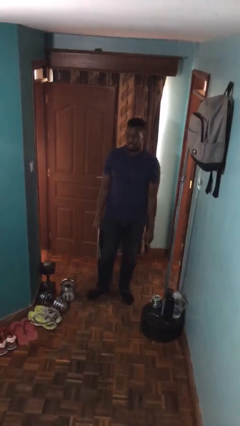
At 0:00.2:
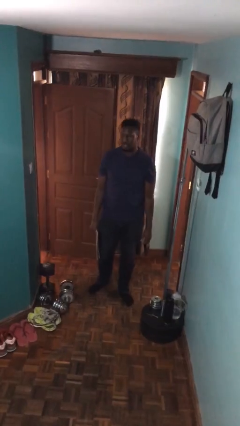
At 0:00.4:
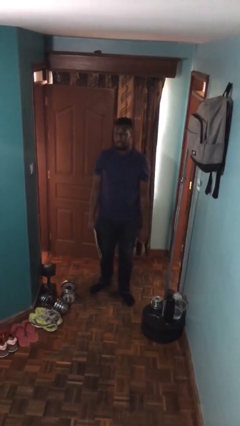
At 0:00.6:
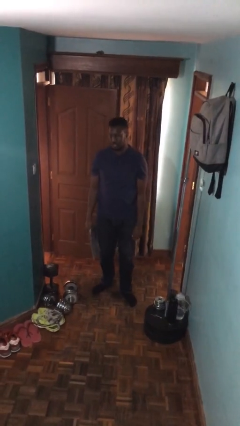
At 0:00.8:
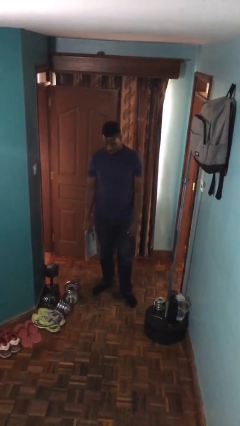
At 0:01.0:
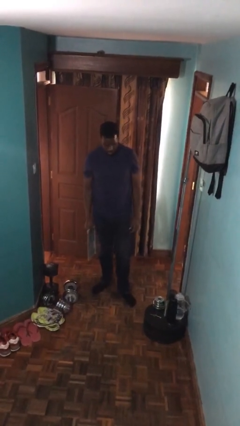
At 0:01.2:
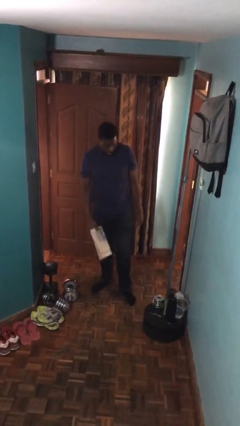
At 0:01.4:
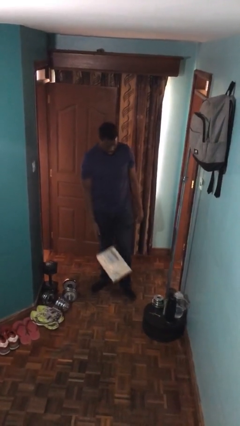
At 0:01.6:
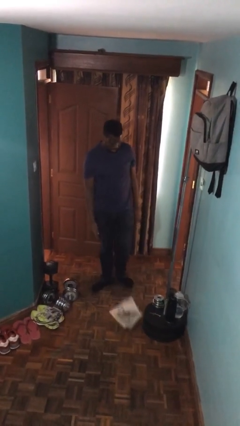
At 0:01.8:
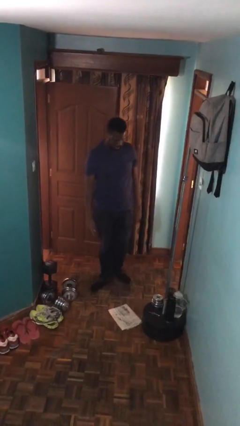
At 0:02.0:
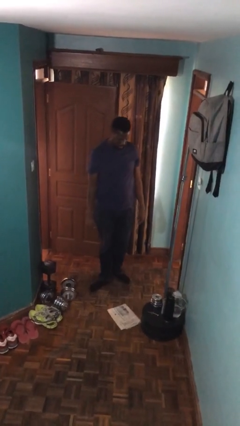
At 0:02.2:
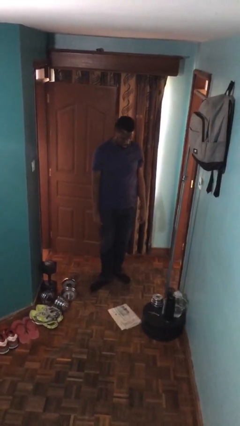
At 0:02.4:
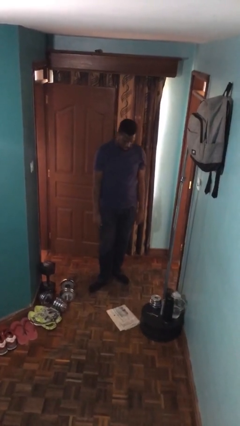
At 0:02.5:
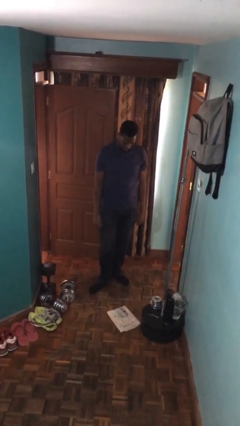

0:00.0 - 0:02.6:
person drops object

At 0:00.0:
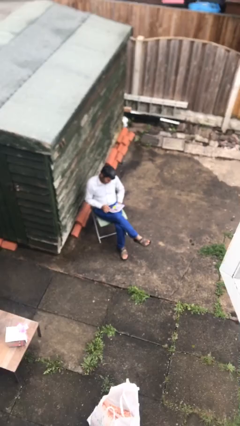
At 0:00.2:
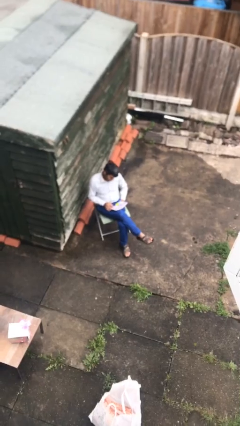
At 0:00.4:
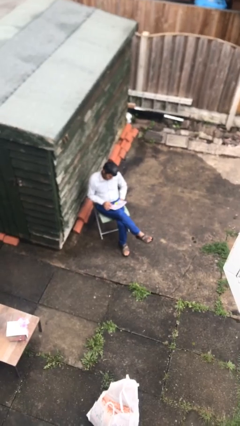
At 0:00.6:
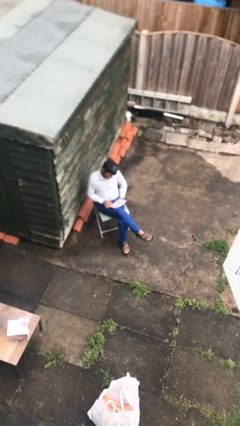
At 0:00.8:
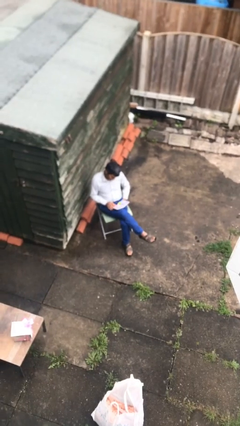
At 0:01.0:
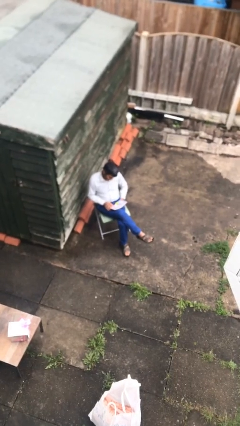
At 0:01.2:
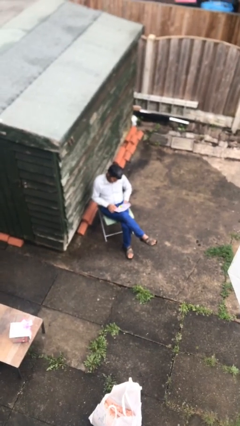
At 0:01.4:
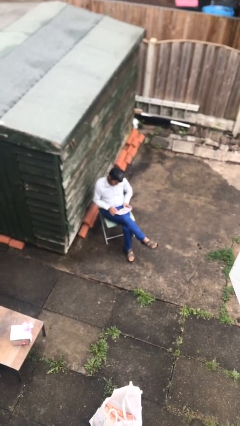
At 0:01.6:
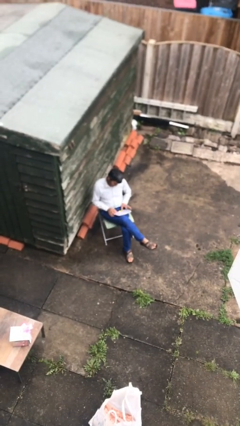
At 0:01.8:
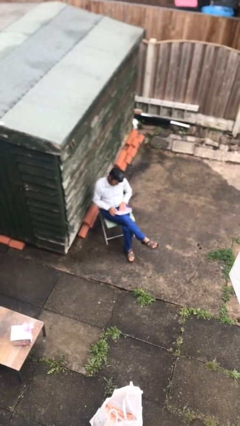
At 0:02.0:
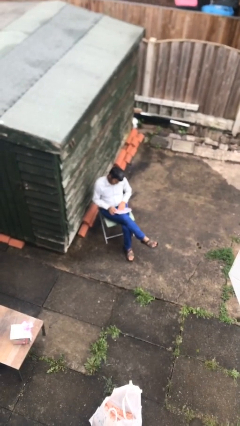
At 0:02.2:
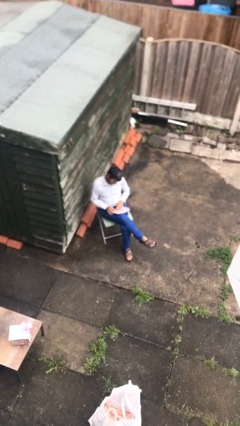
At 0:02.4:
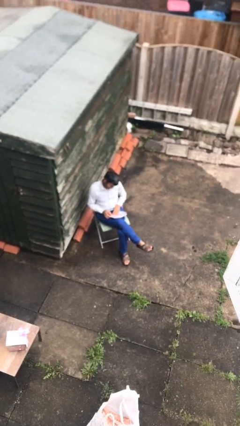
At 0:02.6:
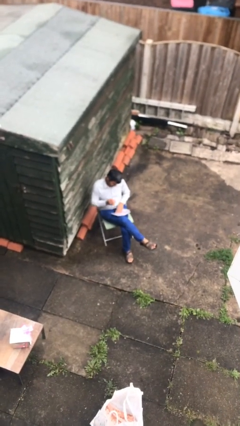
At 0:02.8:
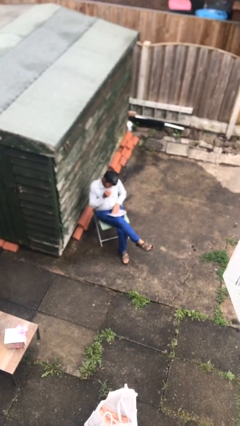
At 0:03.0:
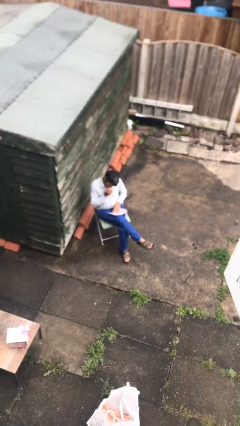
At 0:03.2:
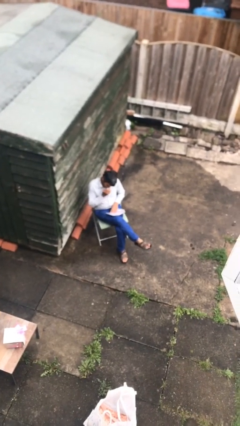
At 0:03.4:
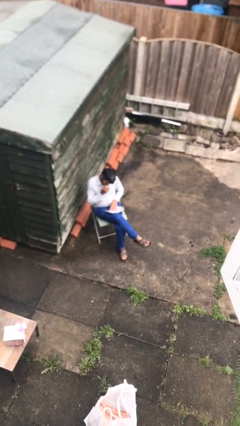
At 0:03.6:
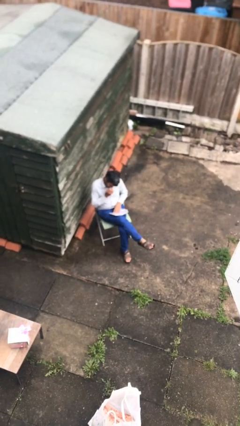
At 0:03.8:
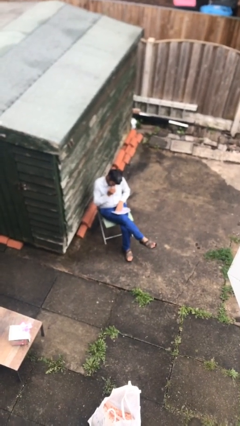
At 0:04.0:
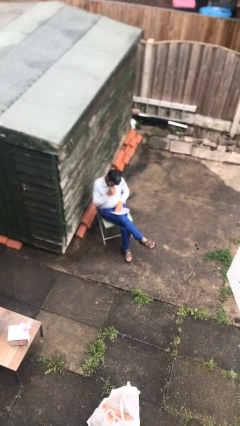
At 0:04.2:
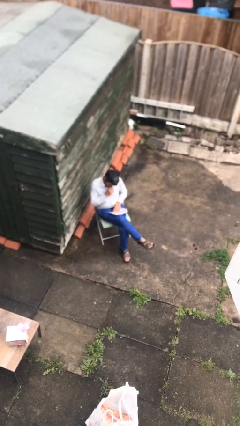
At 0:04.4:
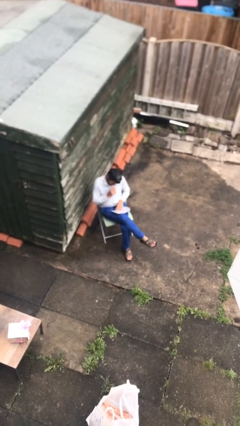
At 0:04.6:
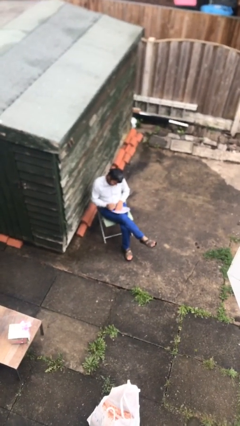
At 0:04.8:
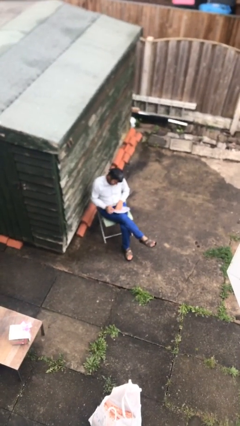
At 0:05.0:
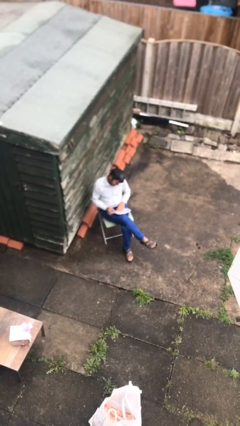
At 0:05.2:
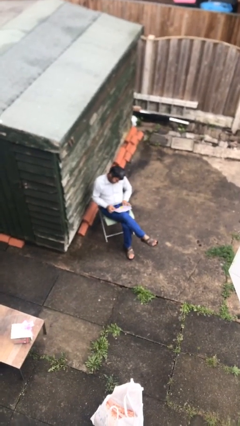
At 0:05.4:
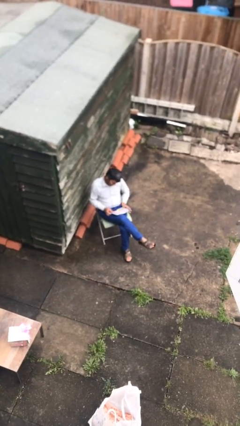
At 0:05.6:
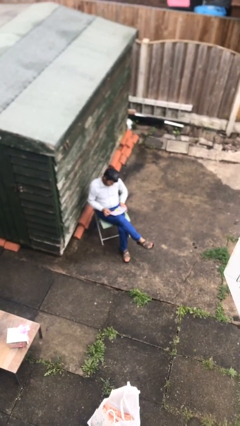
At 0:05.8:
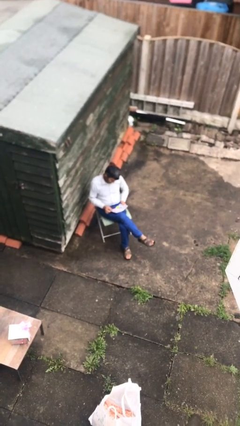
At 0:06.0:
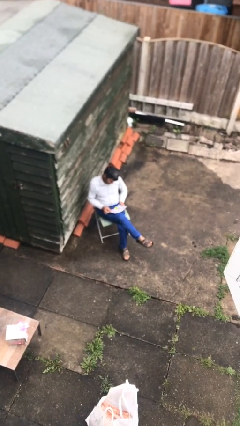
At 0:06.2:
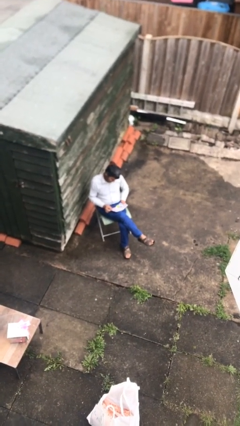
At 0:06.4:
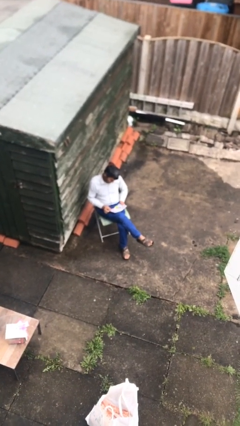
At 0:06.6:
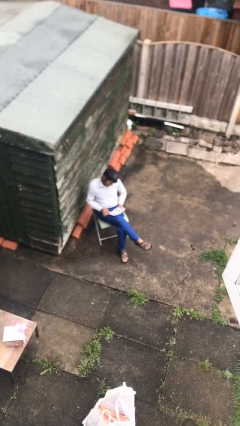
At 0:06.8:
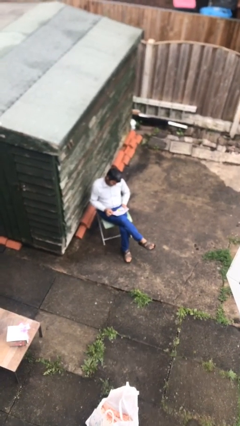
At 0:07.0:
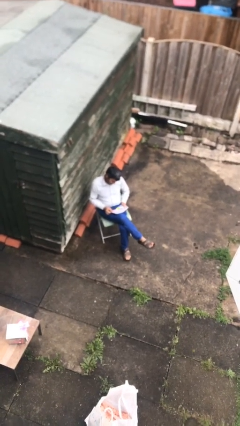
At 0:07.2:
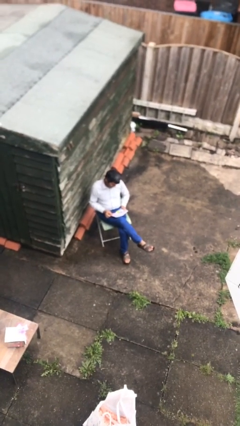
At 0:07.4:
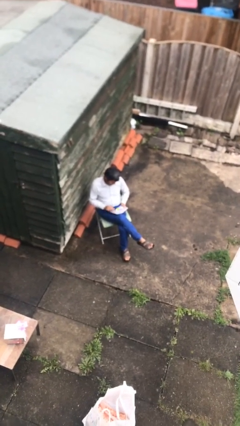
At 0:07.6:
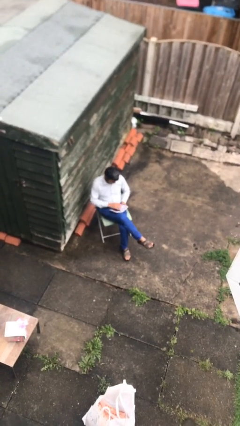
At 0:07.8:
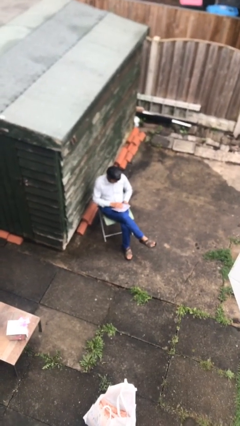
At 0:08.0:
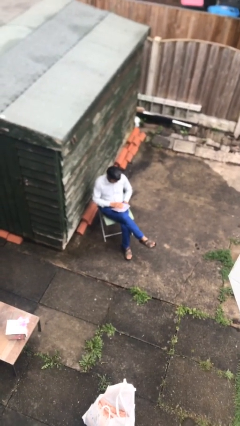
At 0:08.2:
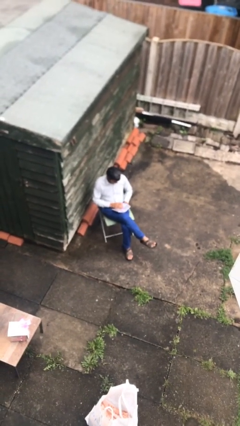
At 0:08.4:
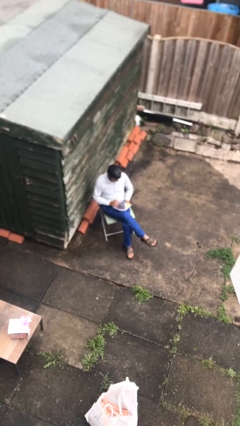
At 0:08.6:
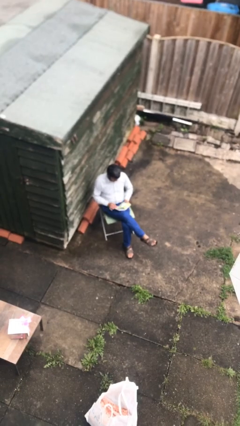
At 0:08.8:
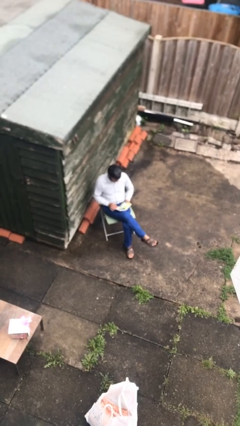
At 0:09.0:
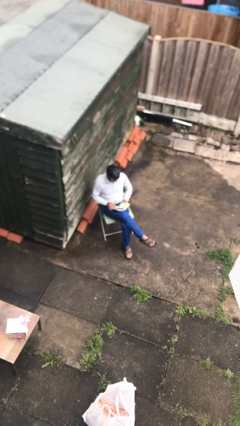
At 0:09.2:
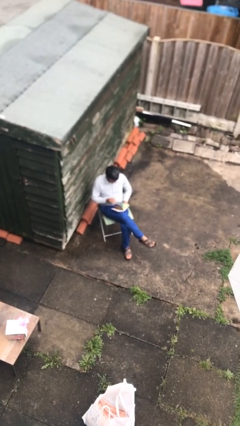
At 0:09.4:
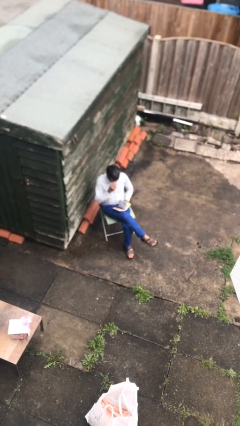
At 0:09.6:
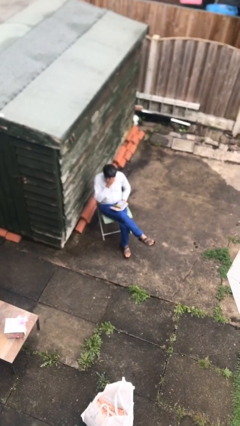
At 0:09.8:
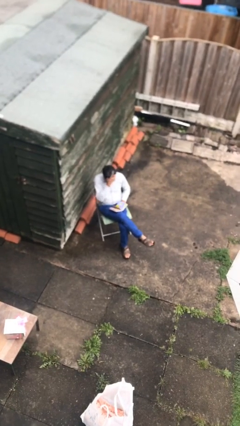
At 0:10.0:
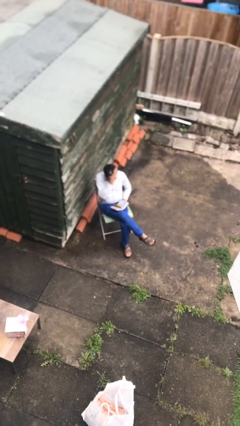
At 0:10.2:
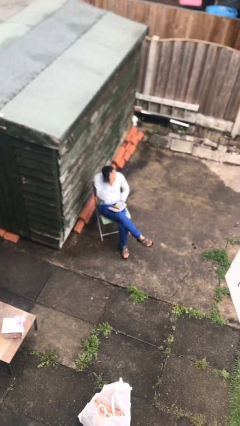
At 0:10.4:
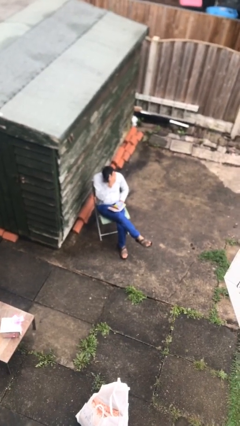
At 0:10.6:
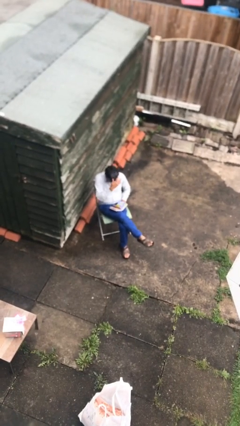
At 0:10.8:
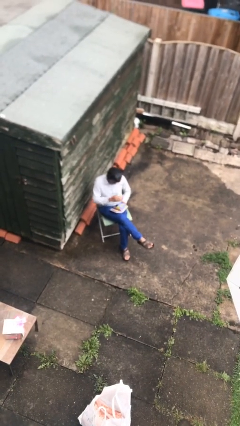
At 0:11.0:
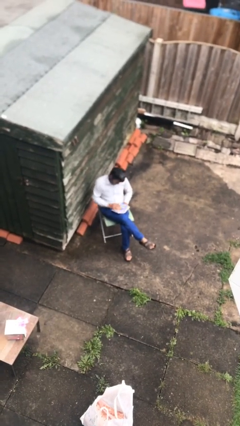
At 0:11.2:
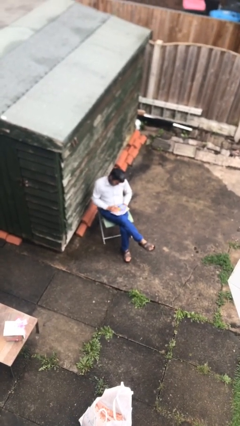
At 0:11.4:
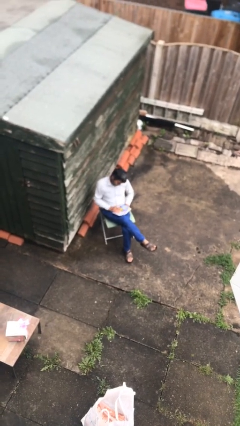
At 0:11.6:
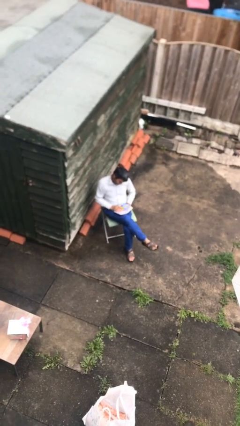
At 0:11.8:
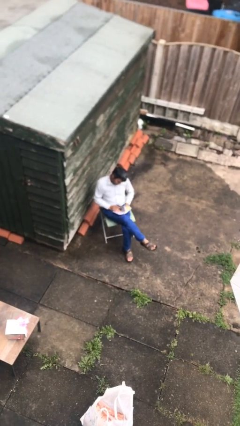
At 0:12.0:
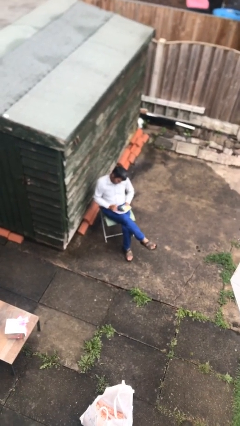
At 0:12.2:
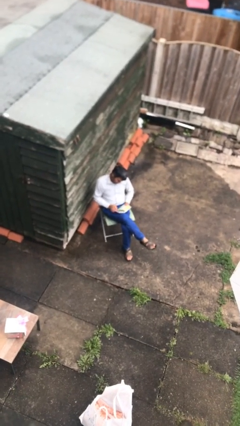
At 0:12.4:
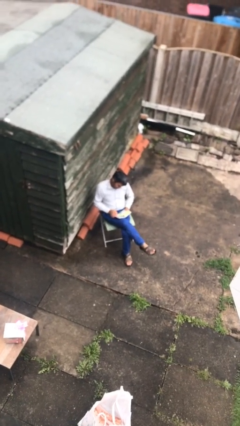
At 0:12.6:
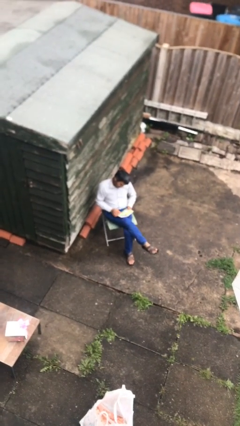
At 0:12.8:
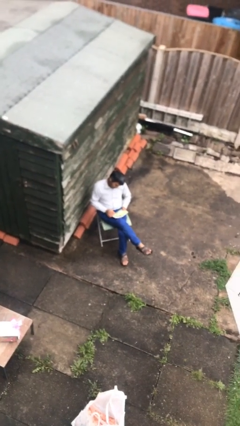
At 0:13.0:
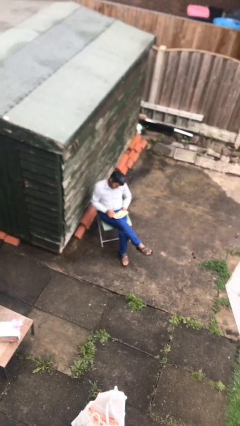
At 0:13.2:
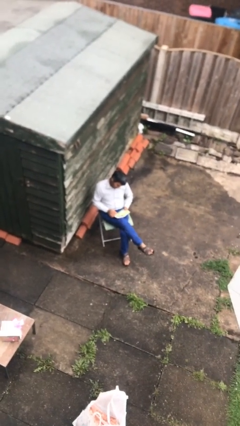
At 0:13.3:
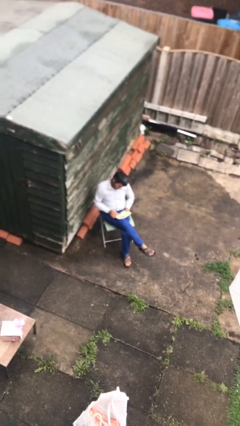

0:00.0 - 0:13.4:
person reads document

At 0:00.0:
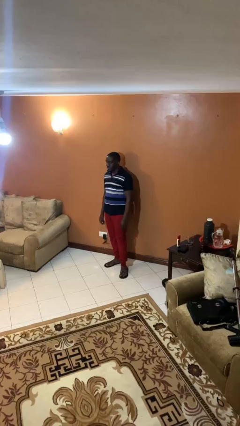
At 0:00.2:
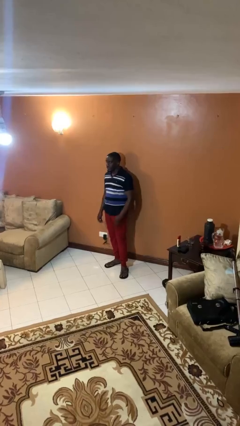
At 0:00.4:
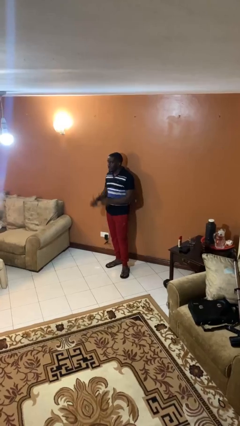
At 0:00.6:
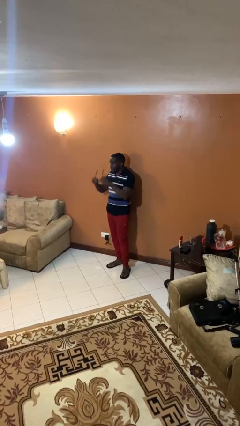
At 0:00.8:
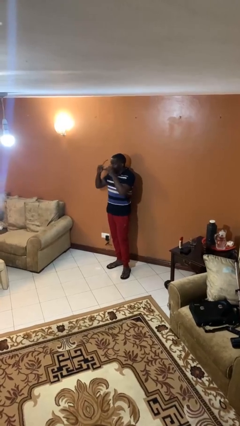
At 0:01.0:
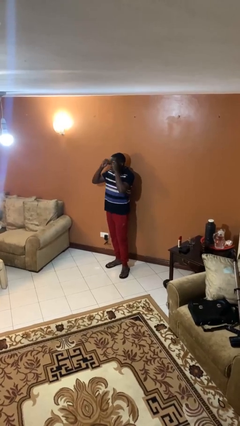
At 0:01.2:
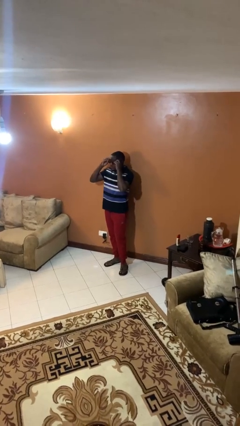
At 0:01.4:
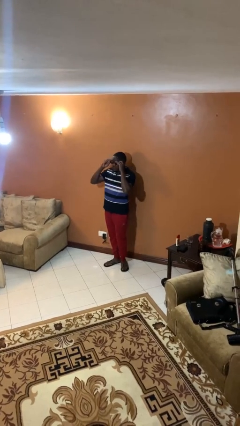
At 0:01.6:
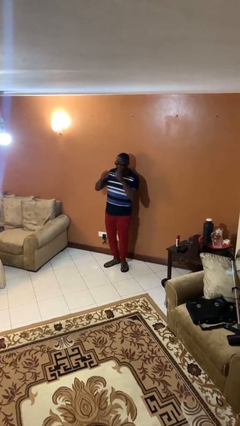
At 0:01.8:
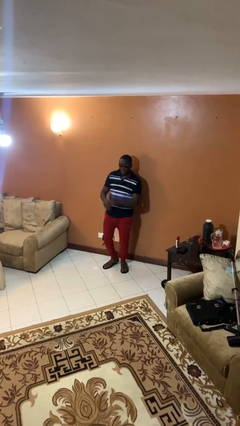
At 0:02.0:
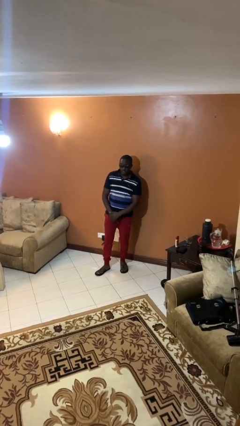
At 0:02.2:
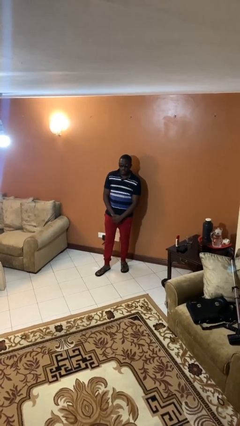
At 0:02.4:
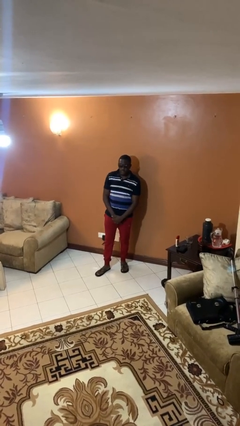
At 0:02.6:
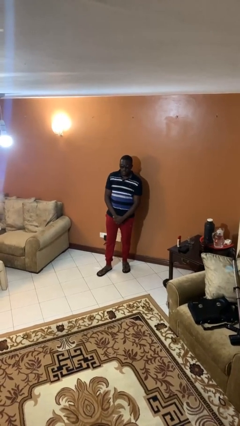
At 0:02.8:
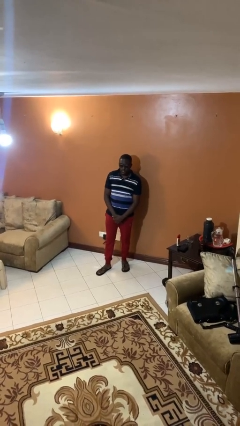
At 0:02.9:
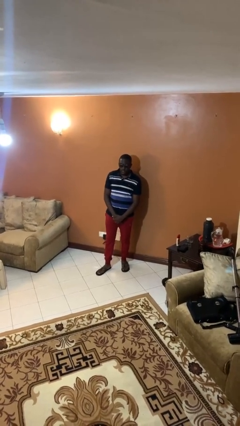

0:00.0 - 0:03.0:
person puts on sunglasses
